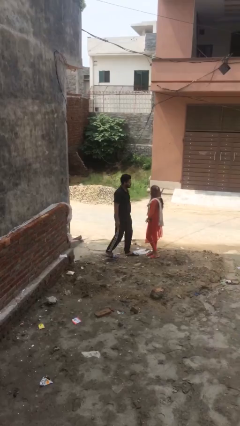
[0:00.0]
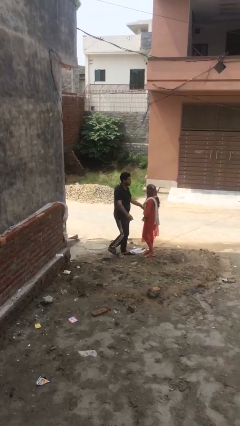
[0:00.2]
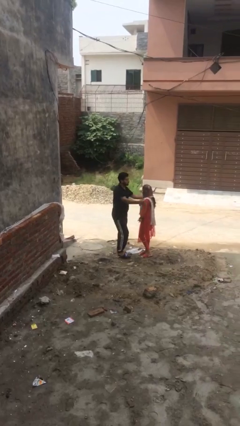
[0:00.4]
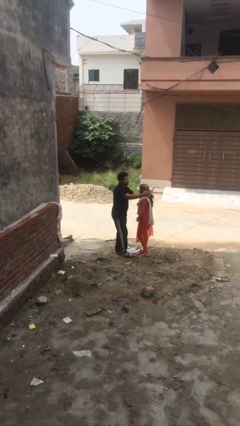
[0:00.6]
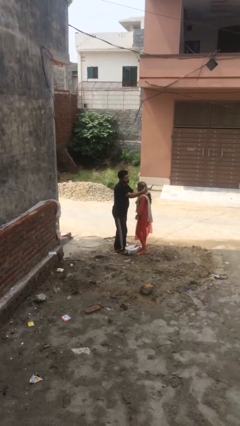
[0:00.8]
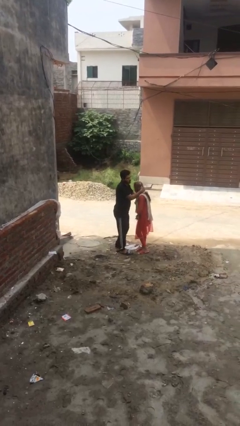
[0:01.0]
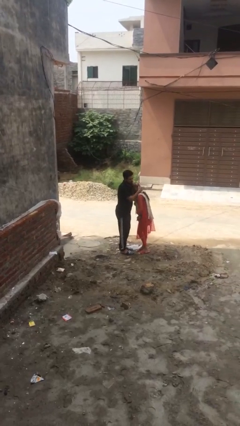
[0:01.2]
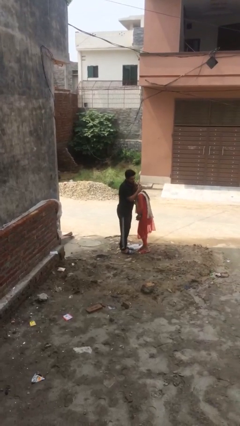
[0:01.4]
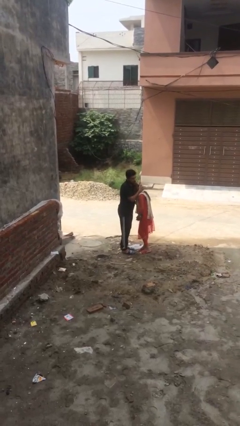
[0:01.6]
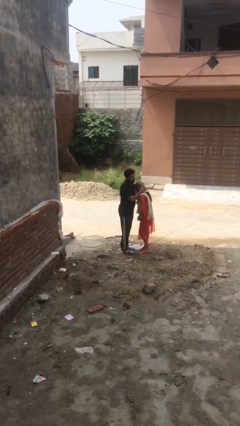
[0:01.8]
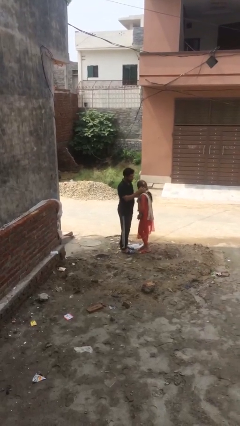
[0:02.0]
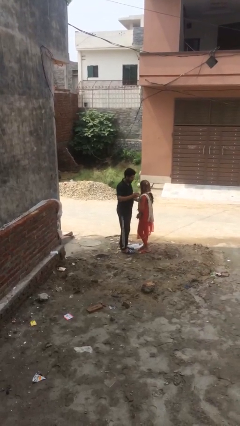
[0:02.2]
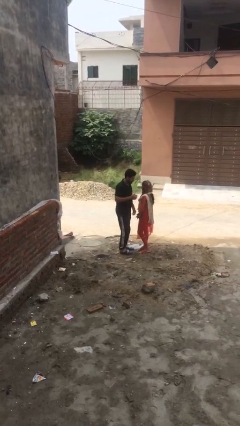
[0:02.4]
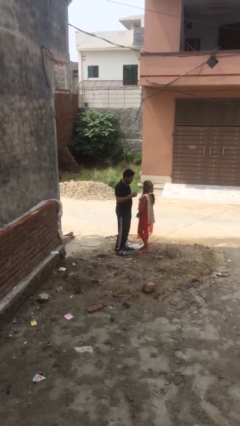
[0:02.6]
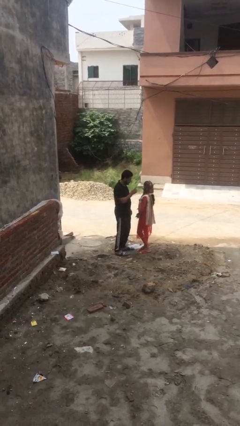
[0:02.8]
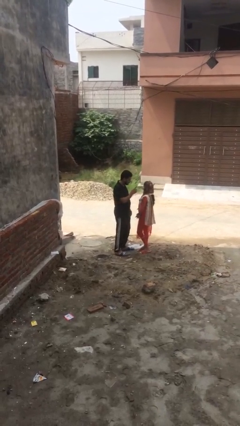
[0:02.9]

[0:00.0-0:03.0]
person embraces person

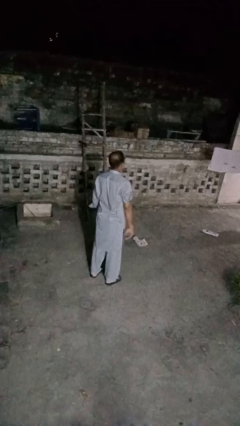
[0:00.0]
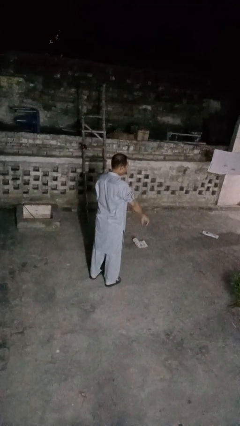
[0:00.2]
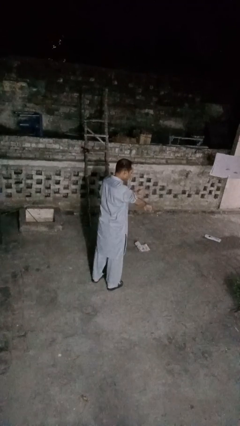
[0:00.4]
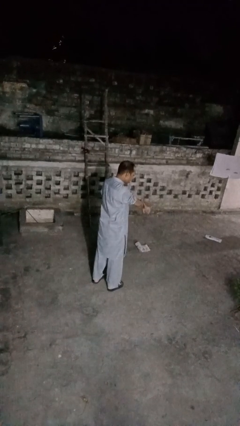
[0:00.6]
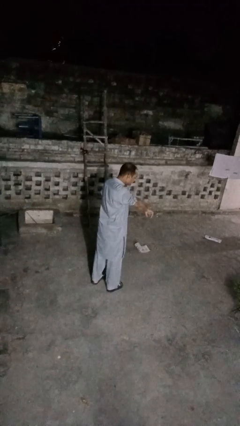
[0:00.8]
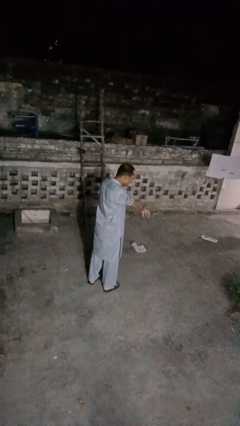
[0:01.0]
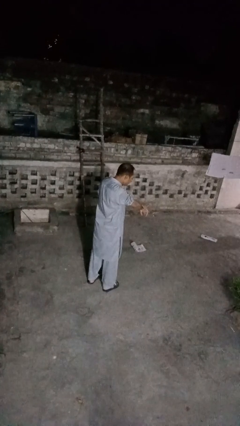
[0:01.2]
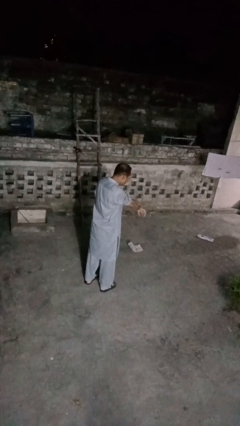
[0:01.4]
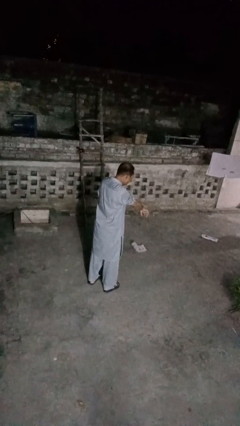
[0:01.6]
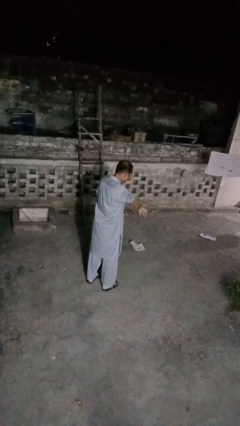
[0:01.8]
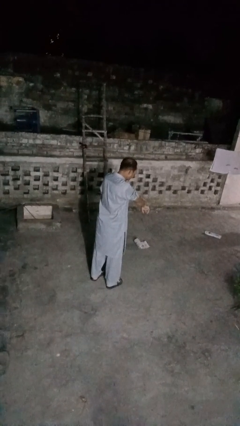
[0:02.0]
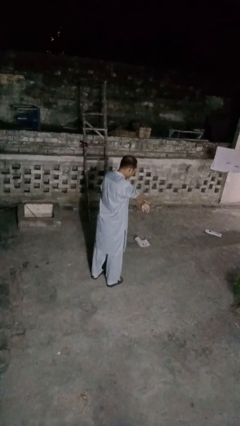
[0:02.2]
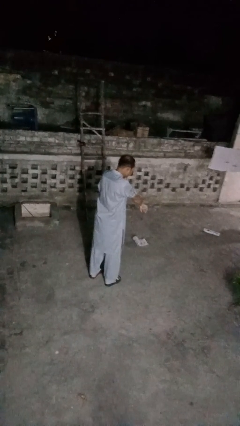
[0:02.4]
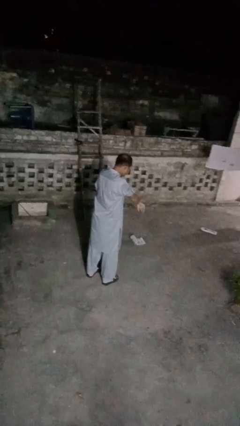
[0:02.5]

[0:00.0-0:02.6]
person swats bug

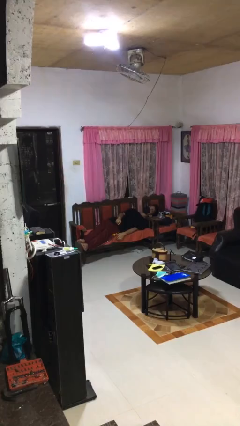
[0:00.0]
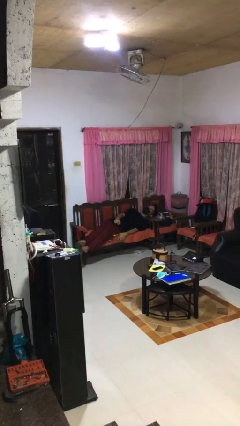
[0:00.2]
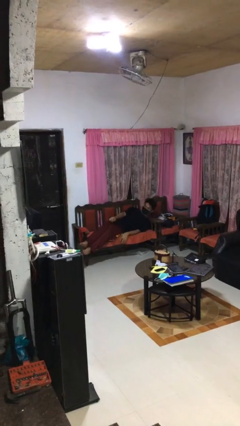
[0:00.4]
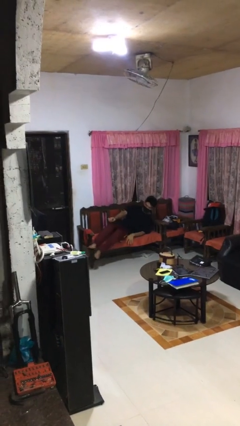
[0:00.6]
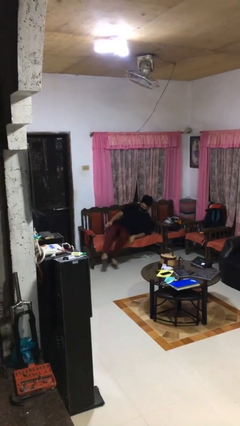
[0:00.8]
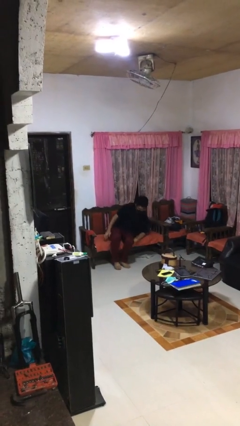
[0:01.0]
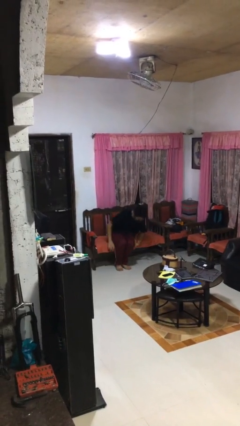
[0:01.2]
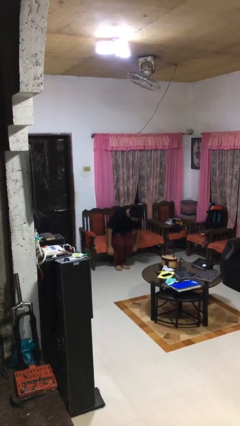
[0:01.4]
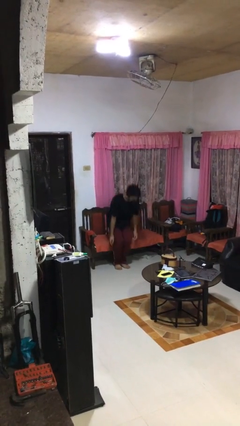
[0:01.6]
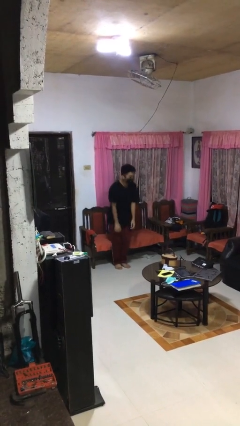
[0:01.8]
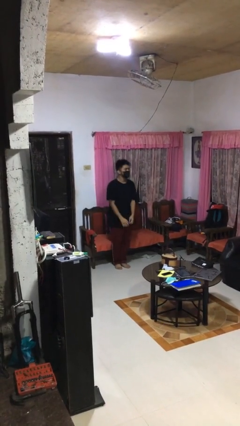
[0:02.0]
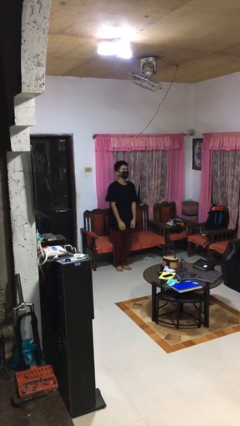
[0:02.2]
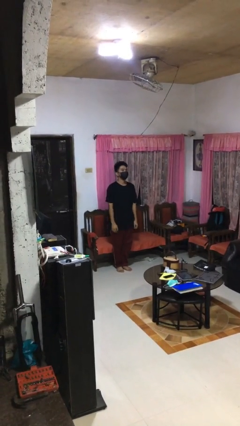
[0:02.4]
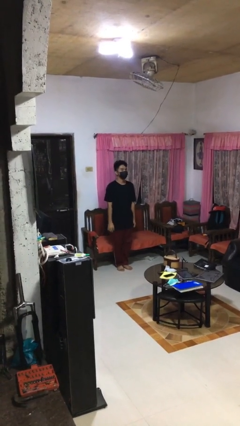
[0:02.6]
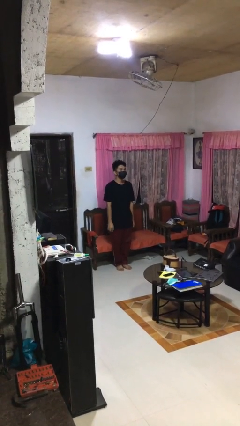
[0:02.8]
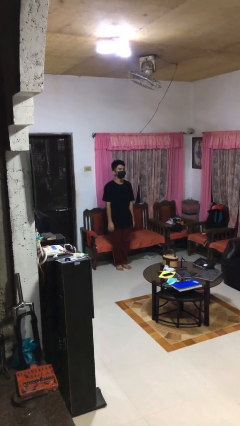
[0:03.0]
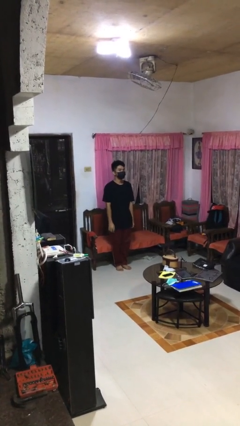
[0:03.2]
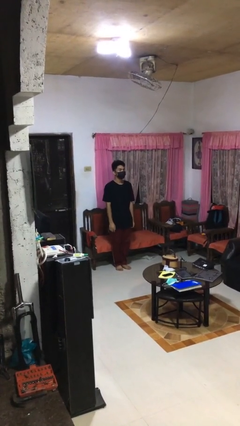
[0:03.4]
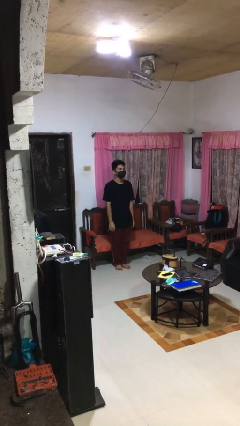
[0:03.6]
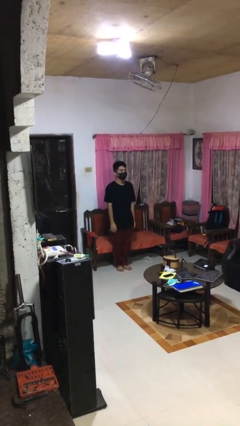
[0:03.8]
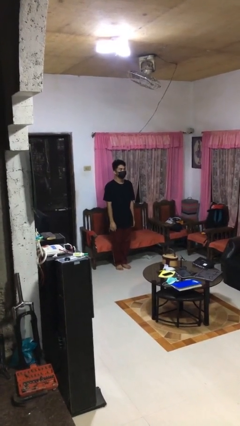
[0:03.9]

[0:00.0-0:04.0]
person stands up

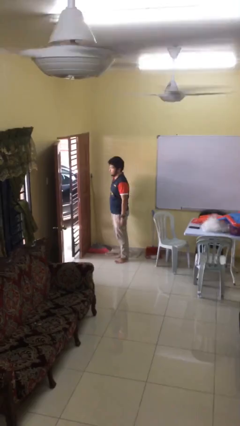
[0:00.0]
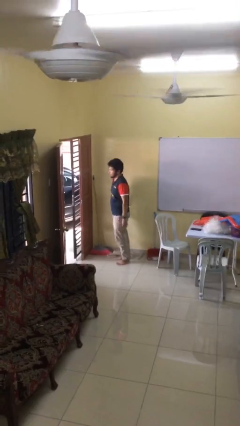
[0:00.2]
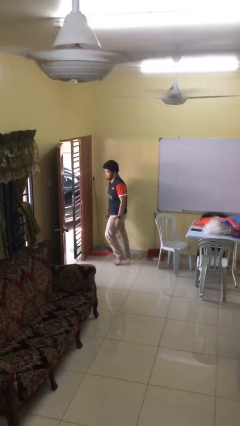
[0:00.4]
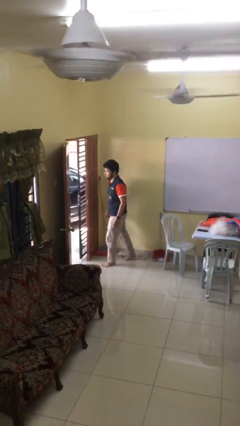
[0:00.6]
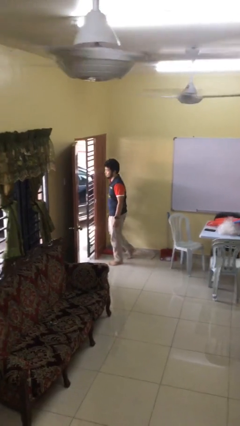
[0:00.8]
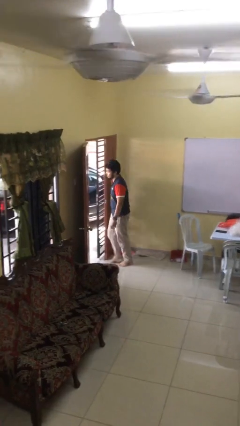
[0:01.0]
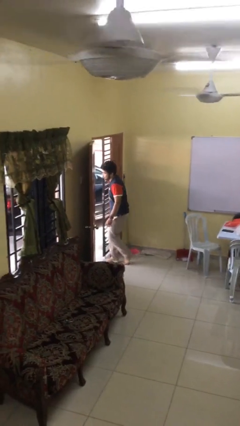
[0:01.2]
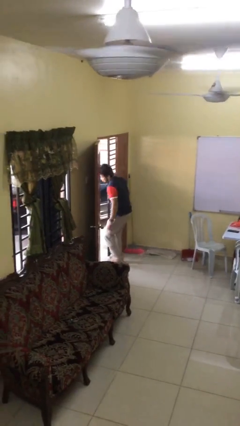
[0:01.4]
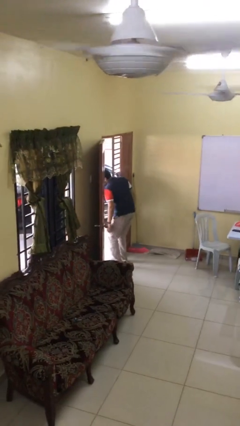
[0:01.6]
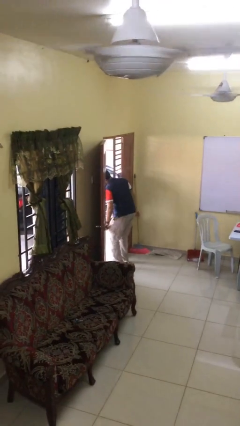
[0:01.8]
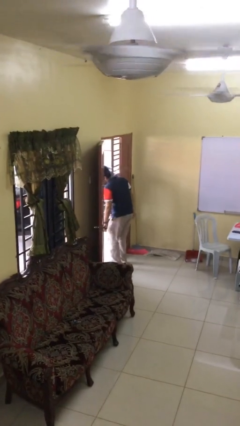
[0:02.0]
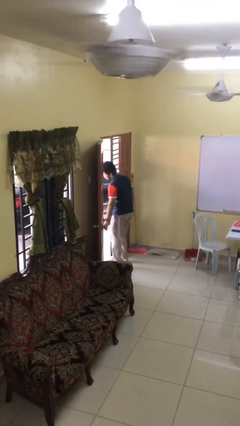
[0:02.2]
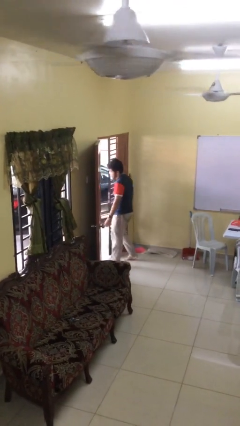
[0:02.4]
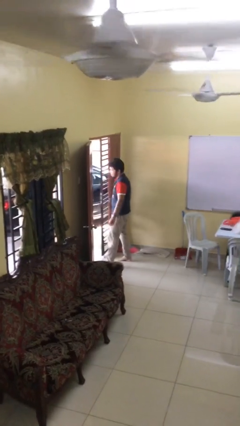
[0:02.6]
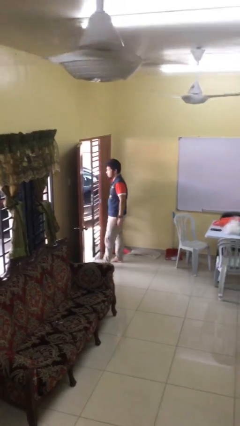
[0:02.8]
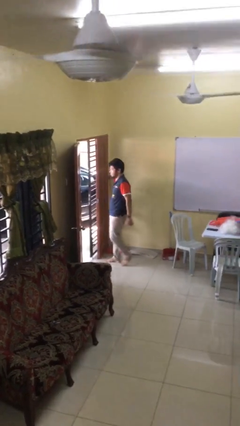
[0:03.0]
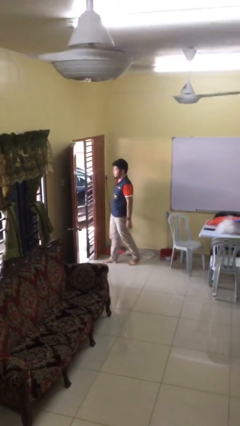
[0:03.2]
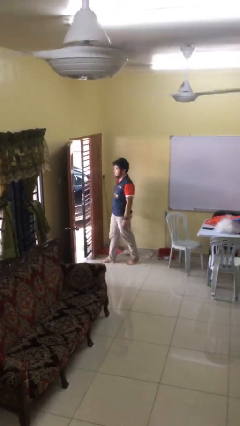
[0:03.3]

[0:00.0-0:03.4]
person bumps into wall

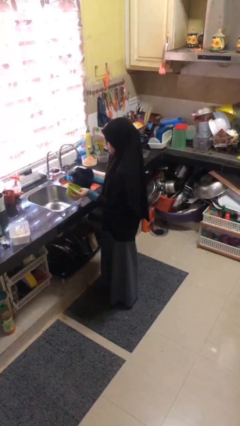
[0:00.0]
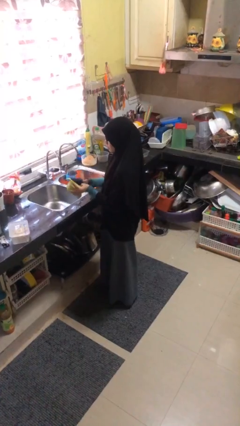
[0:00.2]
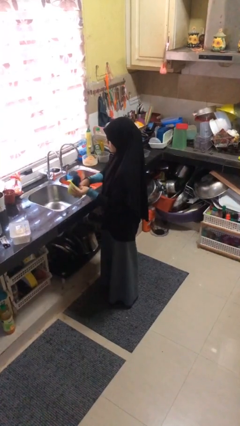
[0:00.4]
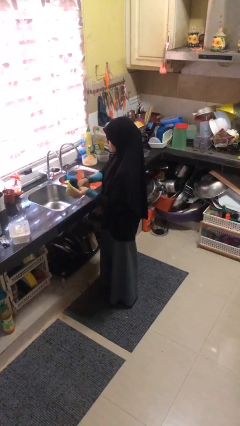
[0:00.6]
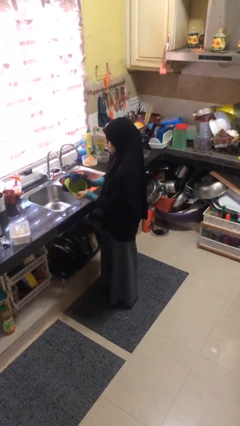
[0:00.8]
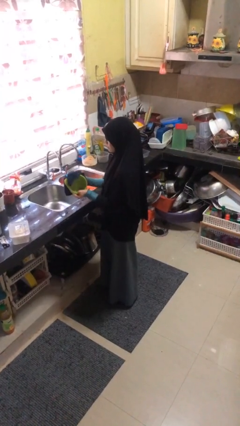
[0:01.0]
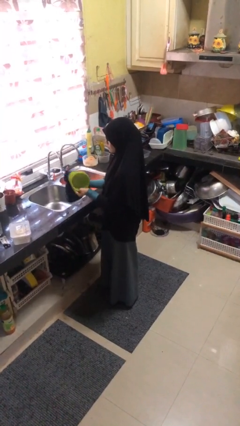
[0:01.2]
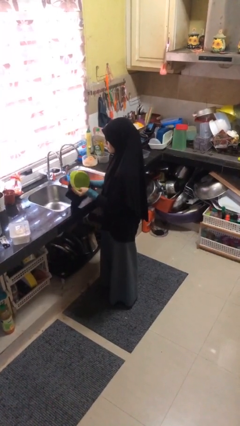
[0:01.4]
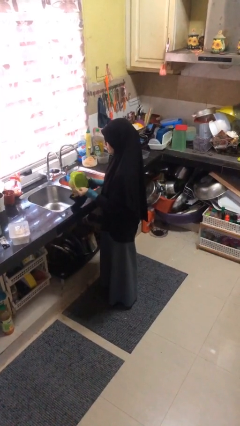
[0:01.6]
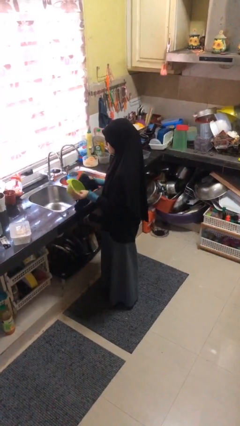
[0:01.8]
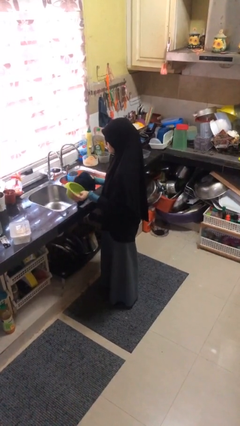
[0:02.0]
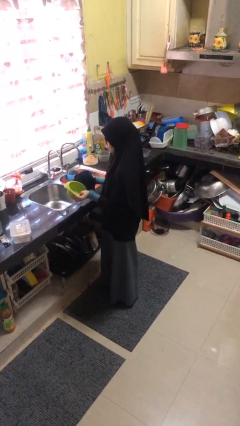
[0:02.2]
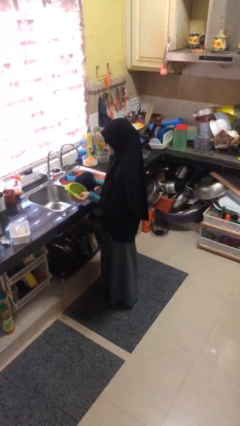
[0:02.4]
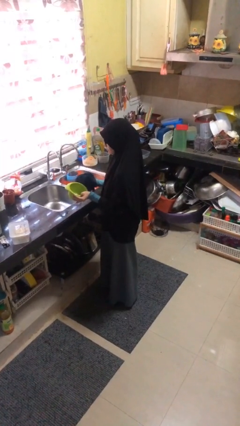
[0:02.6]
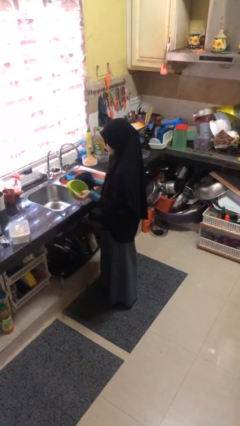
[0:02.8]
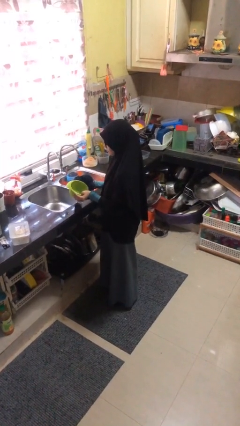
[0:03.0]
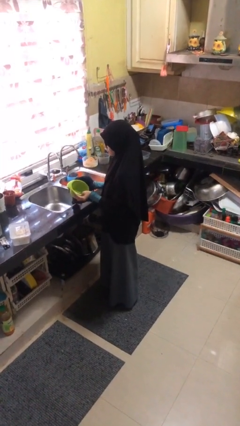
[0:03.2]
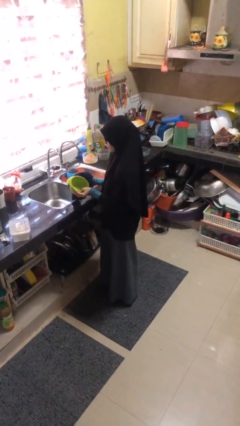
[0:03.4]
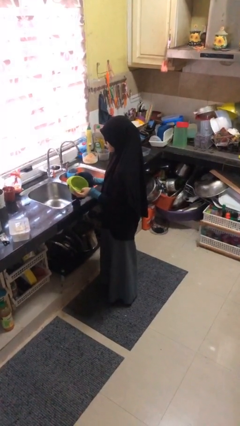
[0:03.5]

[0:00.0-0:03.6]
person dries dish

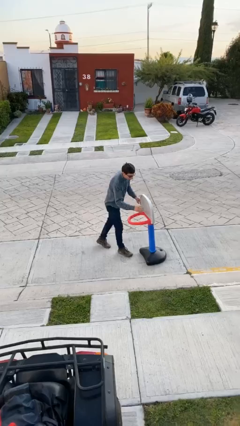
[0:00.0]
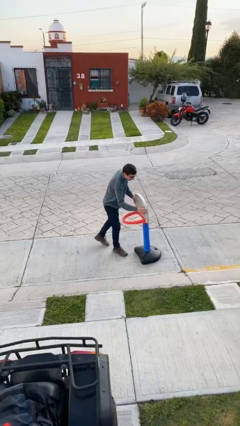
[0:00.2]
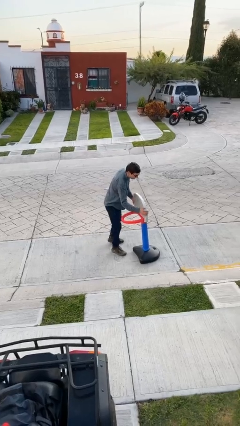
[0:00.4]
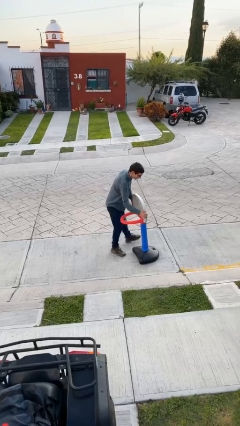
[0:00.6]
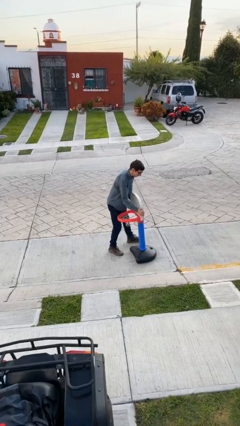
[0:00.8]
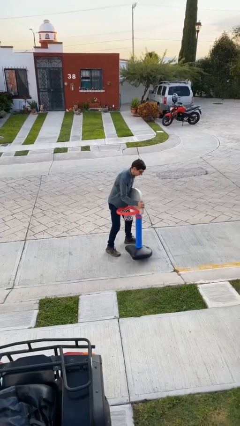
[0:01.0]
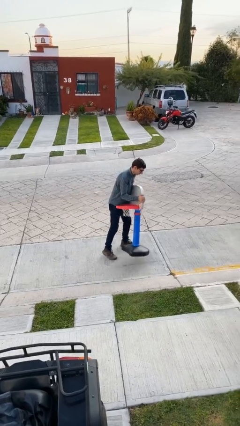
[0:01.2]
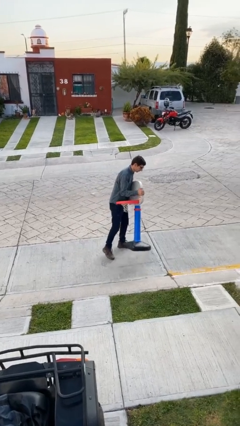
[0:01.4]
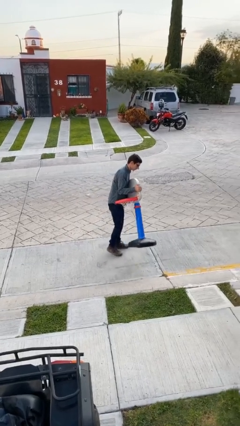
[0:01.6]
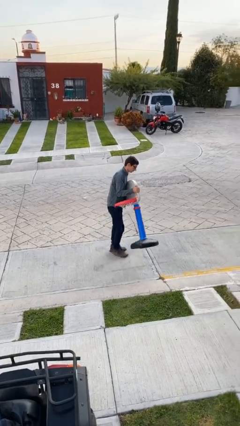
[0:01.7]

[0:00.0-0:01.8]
person picks up object from floor
